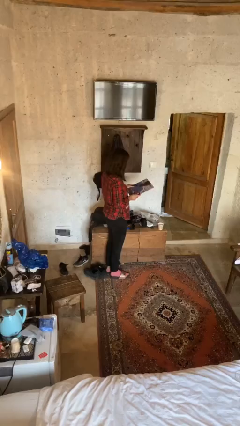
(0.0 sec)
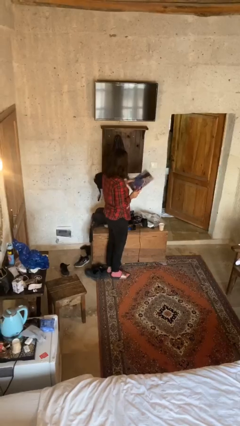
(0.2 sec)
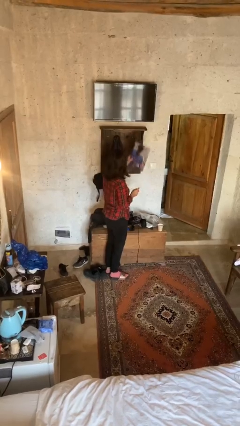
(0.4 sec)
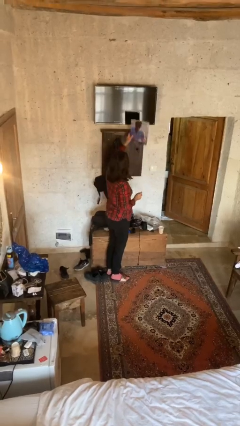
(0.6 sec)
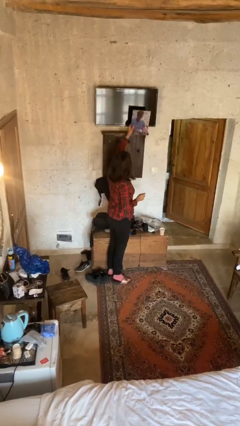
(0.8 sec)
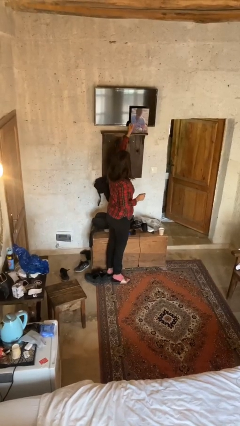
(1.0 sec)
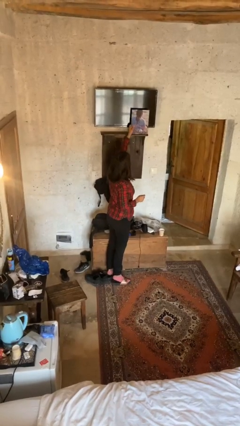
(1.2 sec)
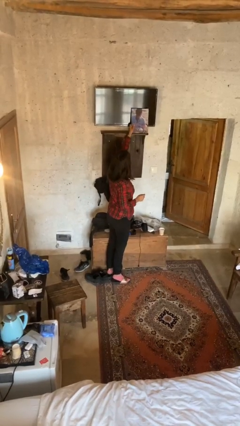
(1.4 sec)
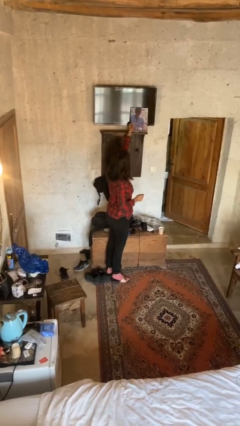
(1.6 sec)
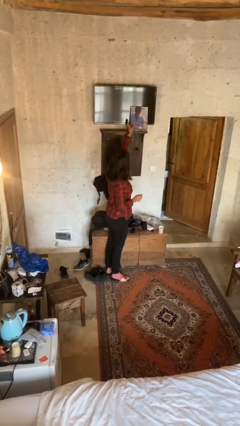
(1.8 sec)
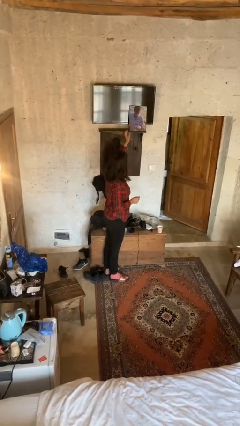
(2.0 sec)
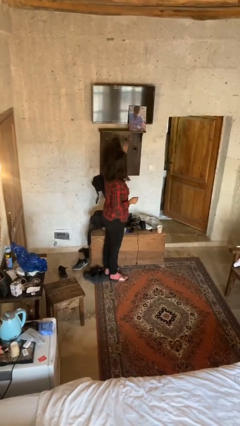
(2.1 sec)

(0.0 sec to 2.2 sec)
person puts down object on shelf

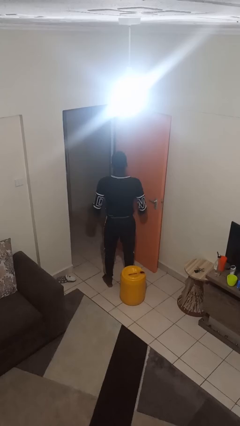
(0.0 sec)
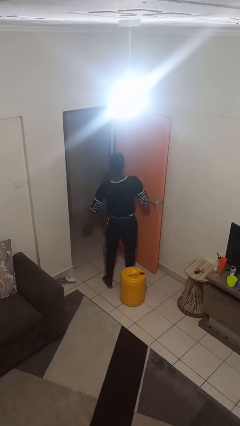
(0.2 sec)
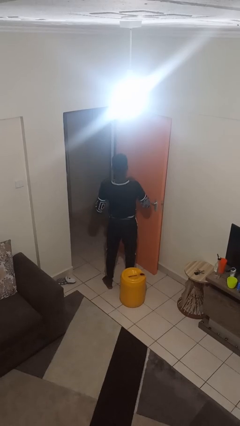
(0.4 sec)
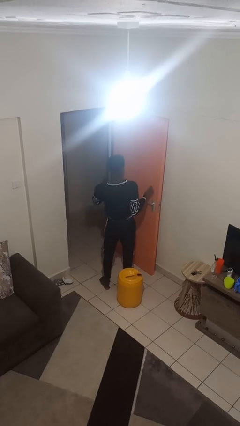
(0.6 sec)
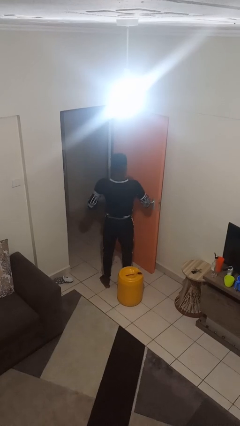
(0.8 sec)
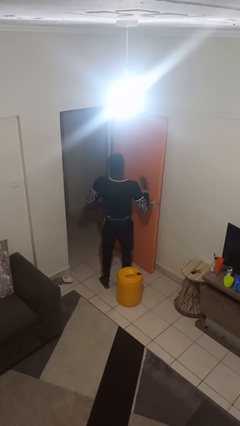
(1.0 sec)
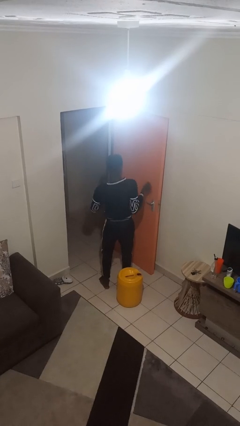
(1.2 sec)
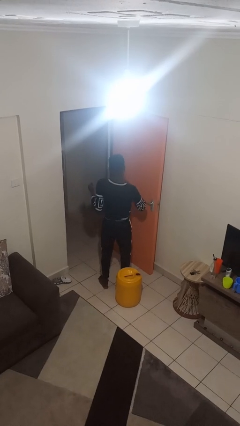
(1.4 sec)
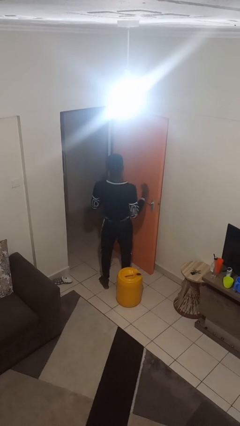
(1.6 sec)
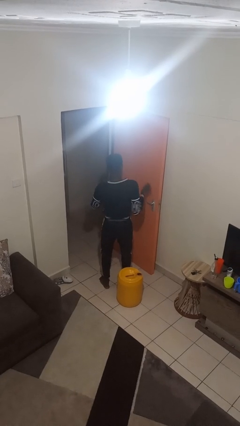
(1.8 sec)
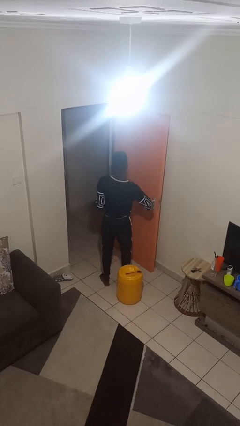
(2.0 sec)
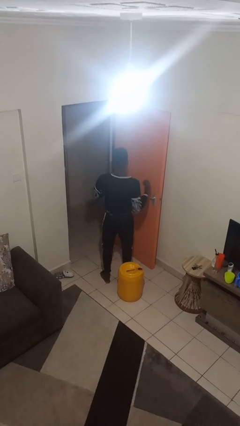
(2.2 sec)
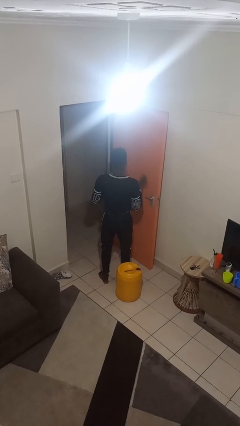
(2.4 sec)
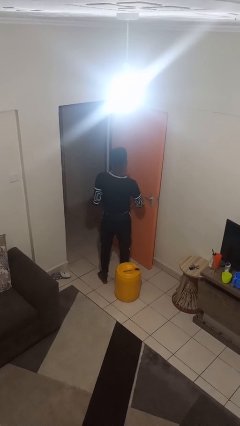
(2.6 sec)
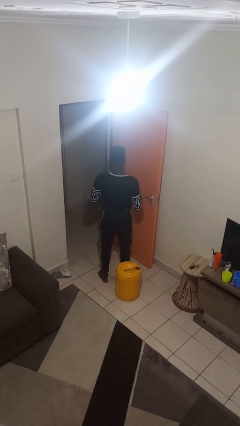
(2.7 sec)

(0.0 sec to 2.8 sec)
person drums on chest

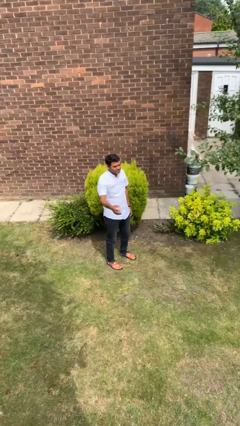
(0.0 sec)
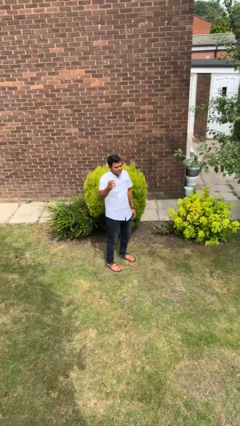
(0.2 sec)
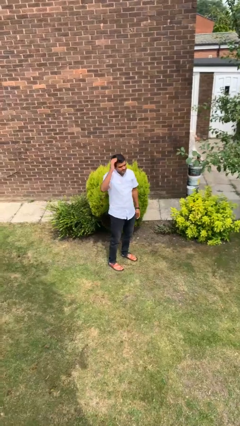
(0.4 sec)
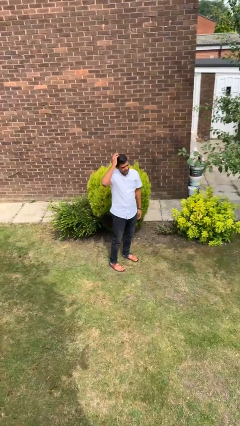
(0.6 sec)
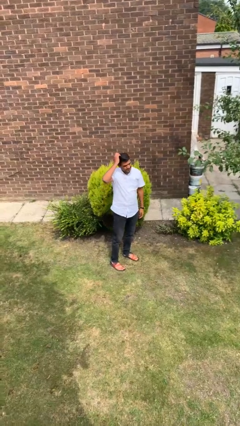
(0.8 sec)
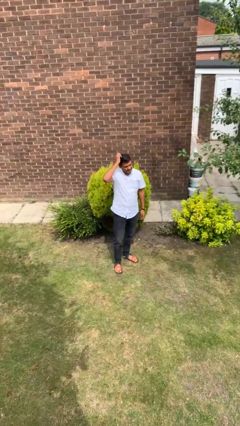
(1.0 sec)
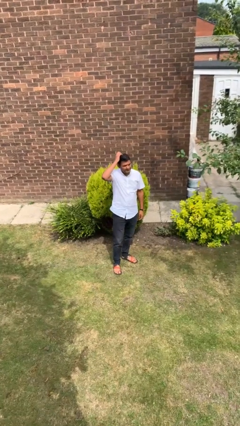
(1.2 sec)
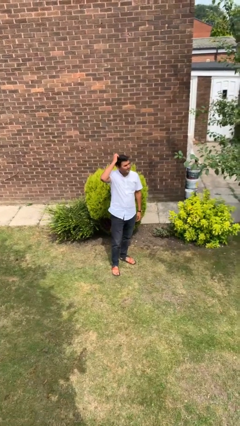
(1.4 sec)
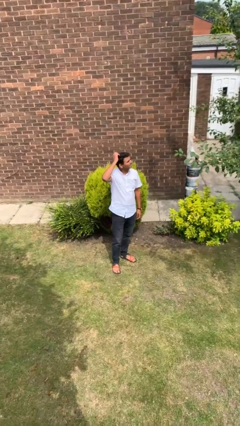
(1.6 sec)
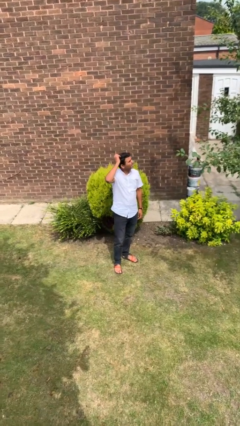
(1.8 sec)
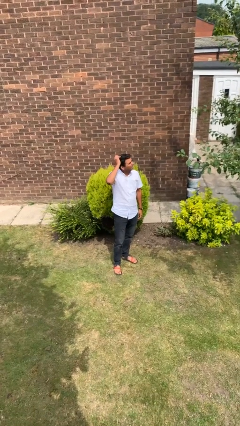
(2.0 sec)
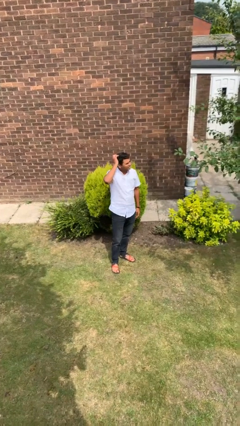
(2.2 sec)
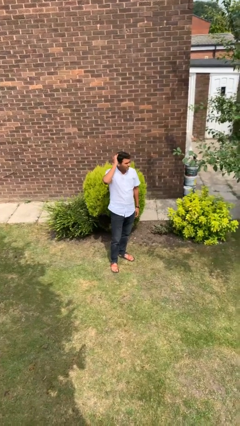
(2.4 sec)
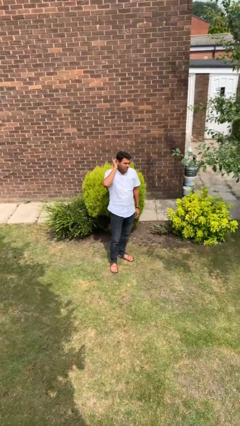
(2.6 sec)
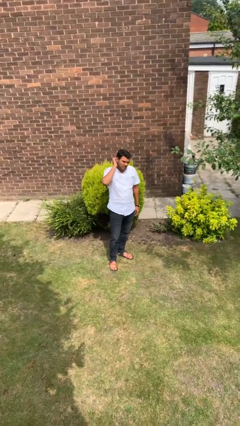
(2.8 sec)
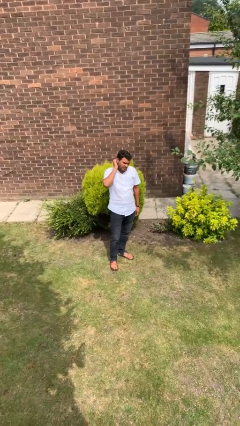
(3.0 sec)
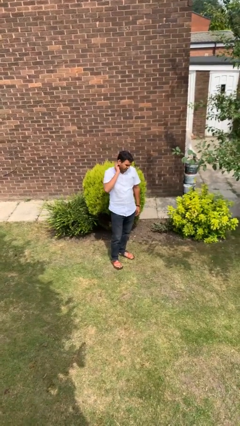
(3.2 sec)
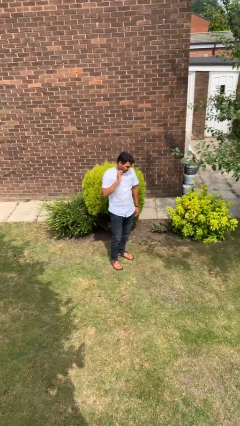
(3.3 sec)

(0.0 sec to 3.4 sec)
person scratches face

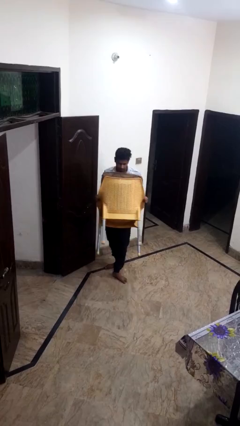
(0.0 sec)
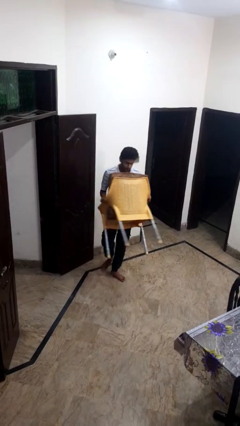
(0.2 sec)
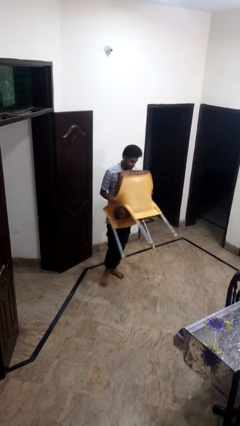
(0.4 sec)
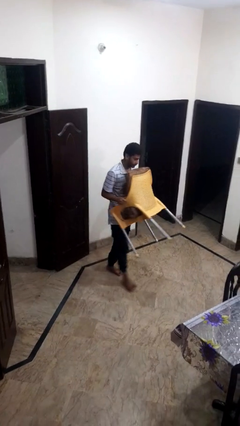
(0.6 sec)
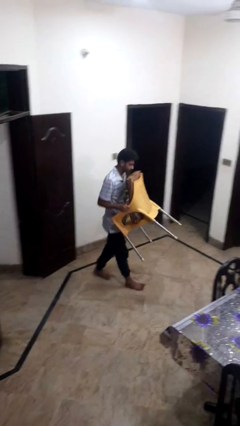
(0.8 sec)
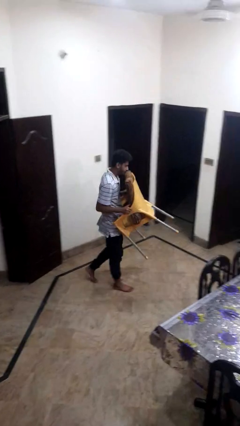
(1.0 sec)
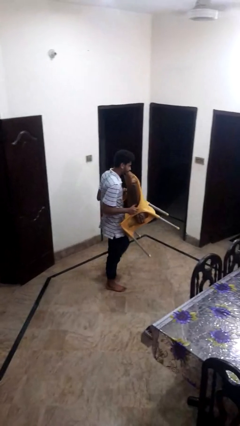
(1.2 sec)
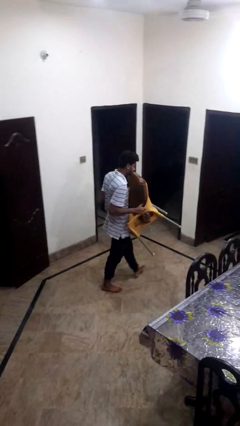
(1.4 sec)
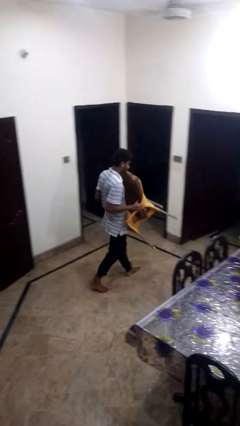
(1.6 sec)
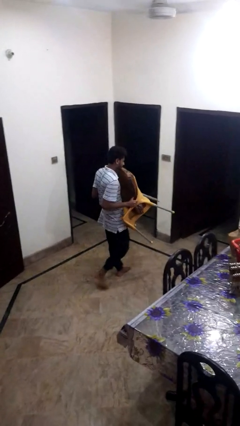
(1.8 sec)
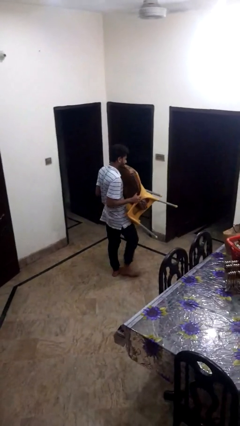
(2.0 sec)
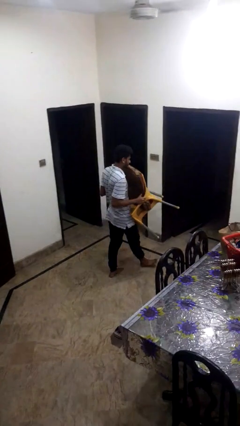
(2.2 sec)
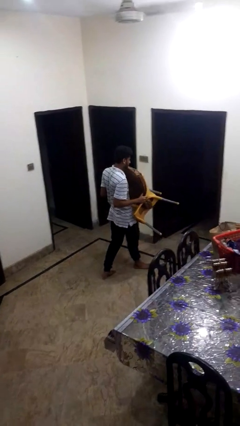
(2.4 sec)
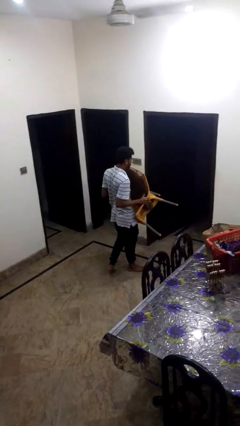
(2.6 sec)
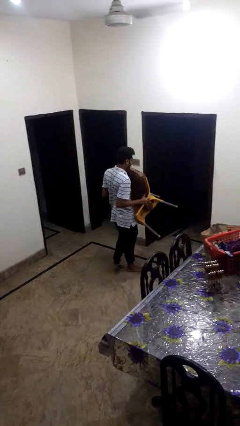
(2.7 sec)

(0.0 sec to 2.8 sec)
person carries furniture

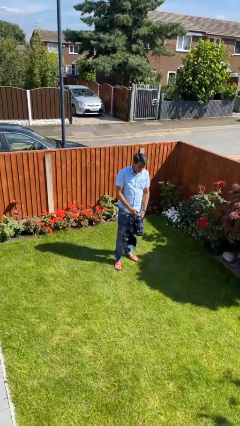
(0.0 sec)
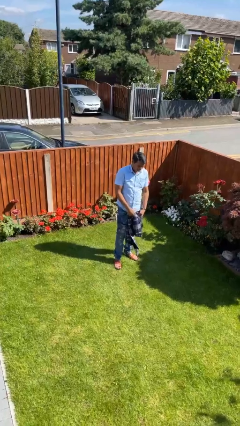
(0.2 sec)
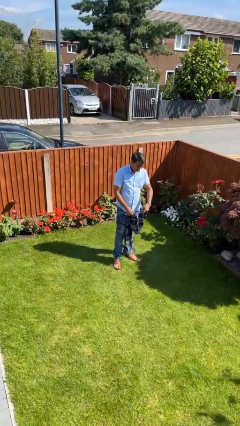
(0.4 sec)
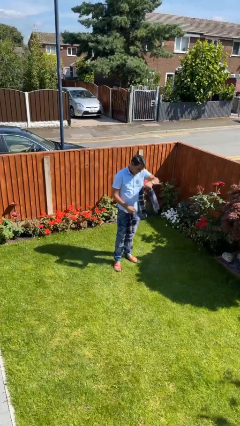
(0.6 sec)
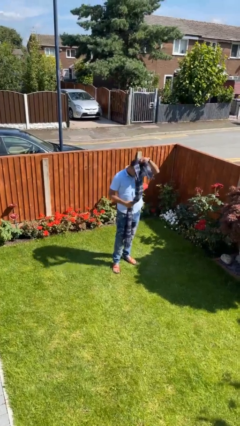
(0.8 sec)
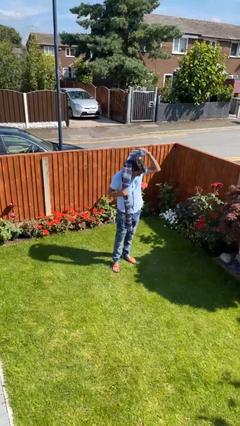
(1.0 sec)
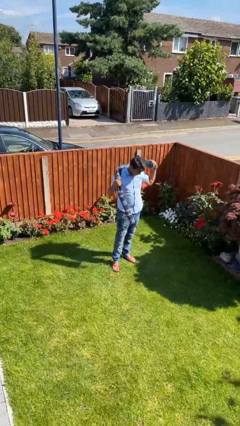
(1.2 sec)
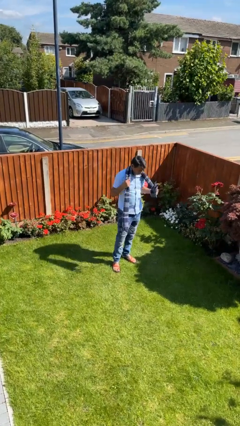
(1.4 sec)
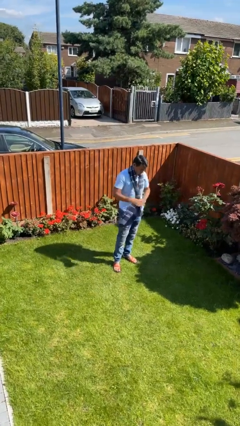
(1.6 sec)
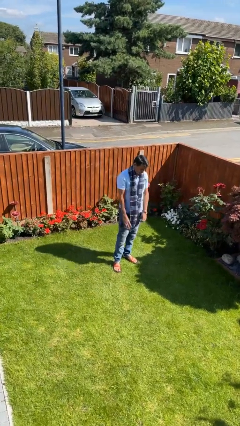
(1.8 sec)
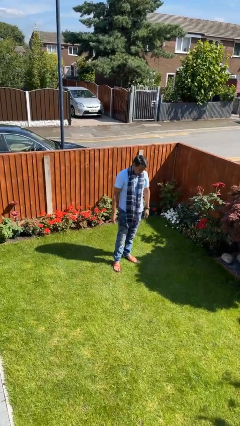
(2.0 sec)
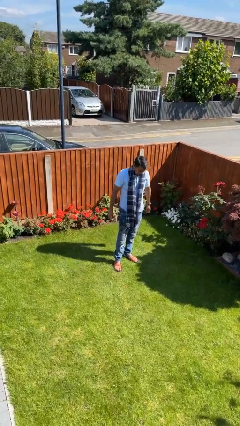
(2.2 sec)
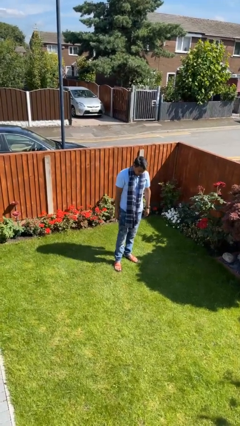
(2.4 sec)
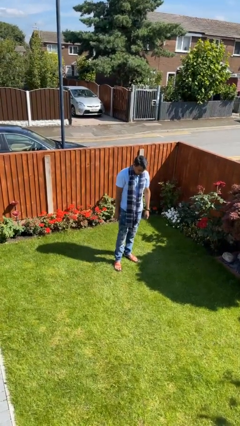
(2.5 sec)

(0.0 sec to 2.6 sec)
person puts on scarf

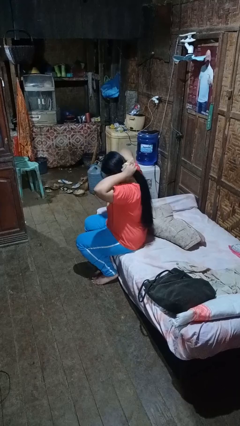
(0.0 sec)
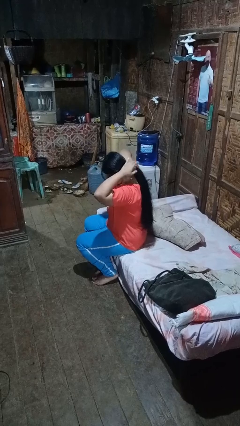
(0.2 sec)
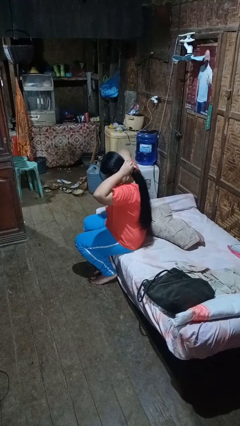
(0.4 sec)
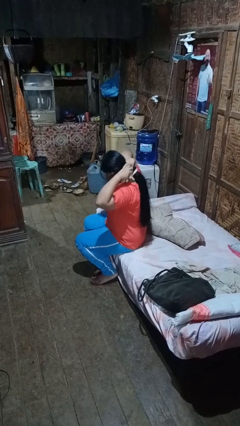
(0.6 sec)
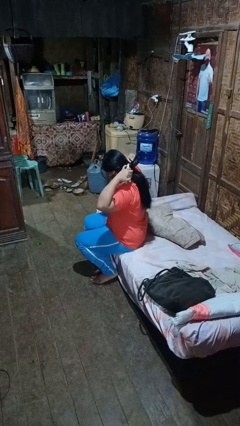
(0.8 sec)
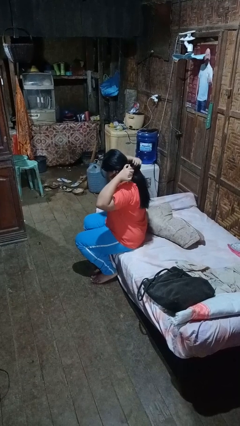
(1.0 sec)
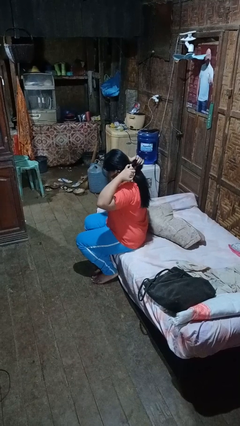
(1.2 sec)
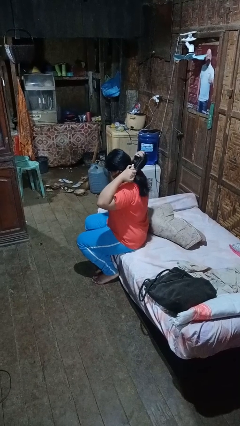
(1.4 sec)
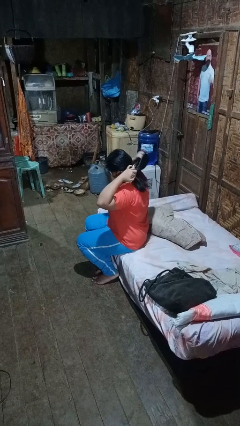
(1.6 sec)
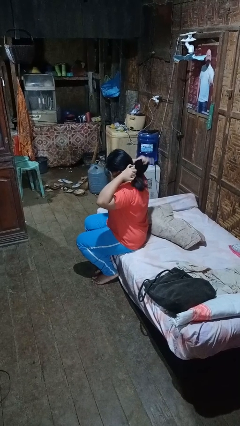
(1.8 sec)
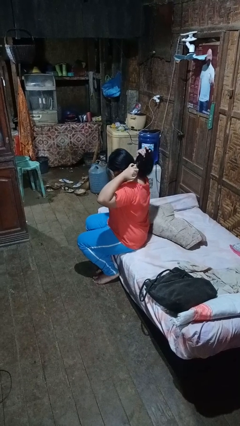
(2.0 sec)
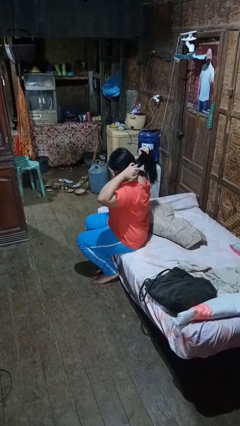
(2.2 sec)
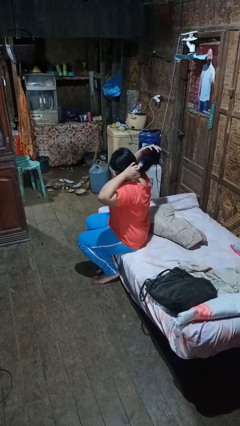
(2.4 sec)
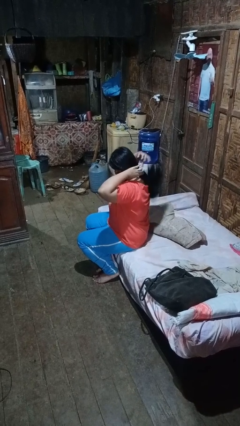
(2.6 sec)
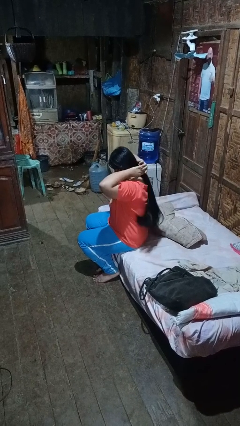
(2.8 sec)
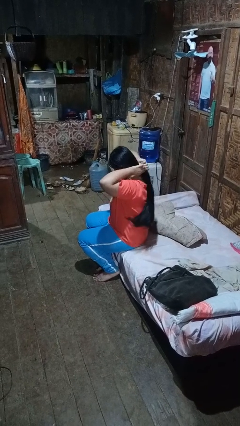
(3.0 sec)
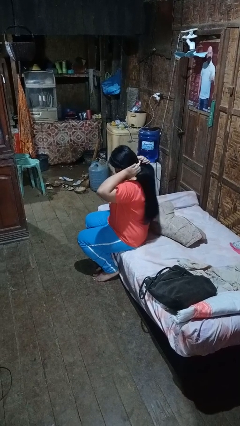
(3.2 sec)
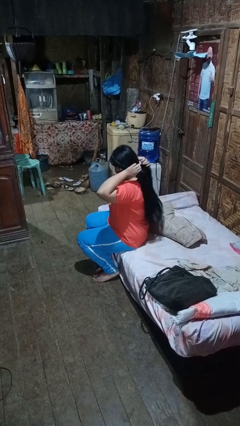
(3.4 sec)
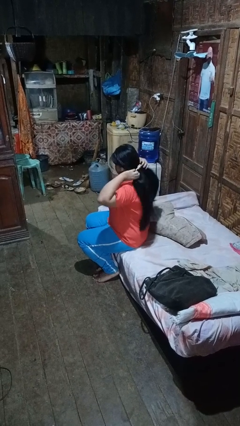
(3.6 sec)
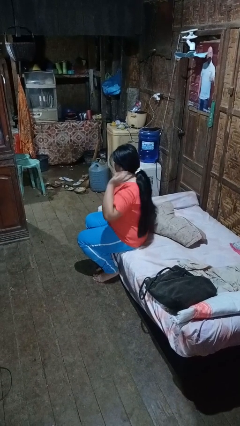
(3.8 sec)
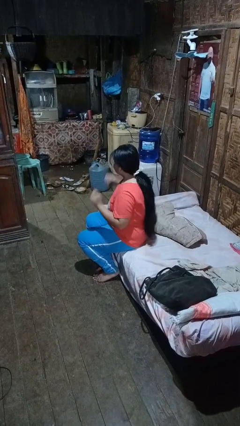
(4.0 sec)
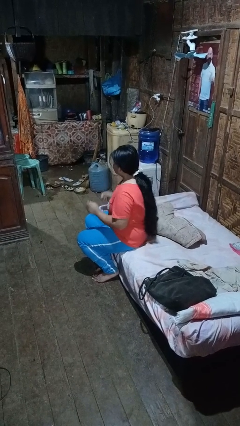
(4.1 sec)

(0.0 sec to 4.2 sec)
person puts hair in ponytail
